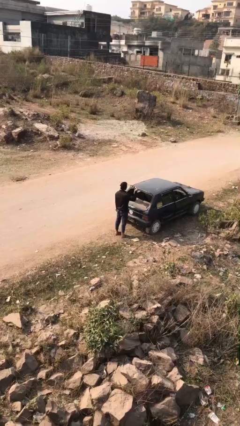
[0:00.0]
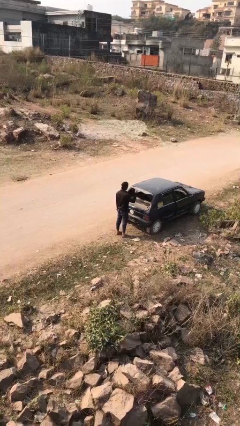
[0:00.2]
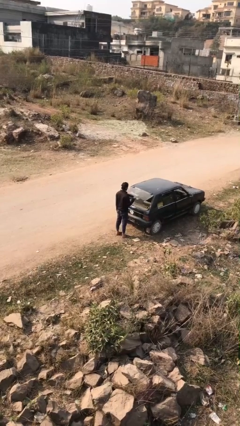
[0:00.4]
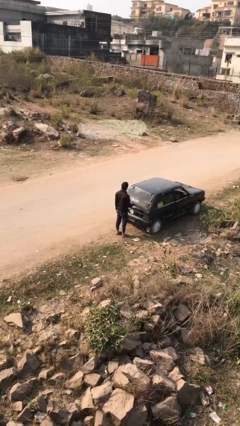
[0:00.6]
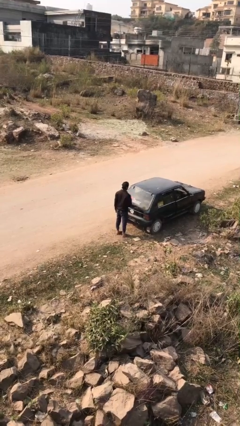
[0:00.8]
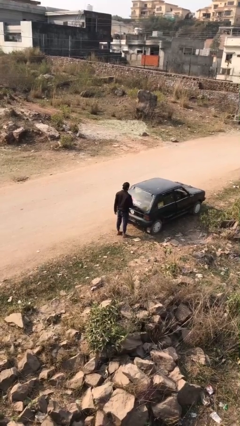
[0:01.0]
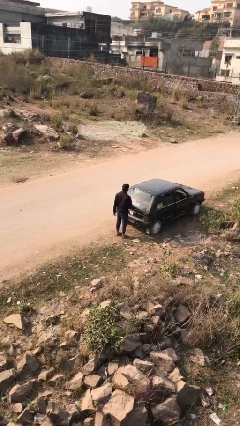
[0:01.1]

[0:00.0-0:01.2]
person closes car trunk

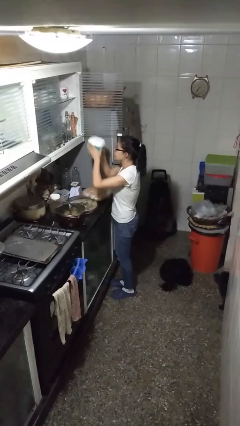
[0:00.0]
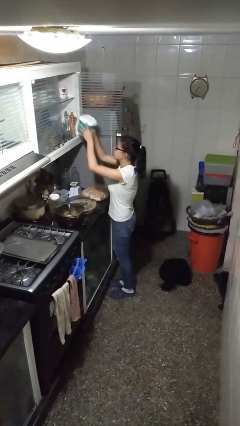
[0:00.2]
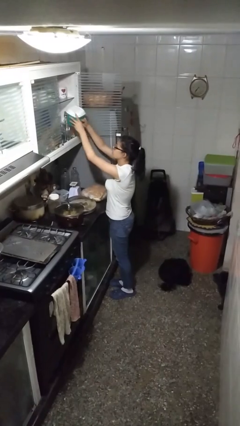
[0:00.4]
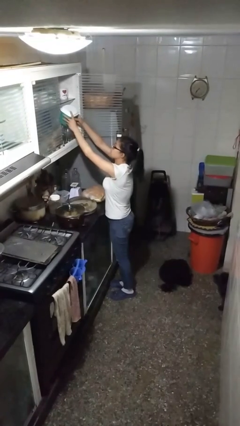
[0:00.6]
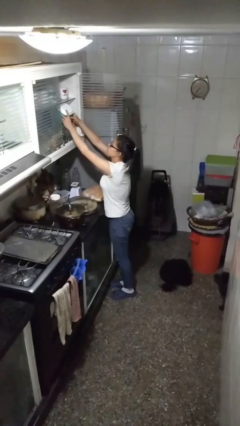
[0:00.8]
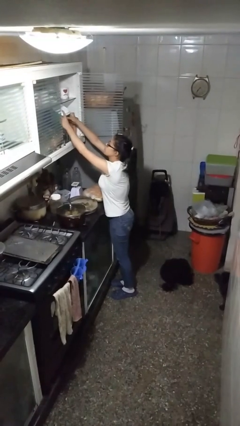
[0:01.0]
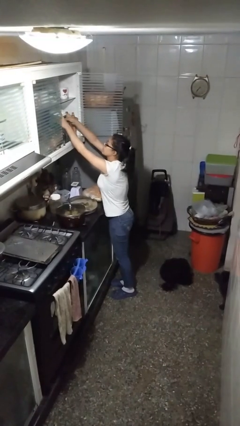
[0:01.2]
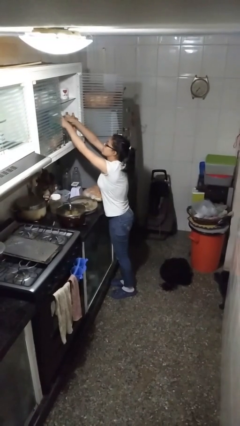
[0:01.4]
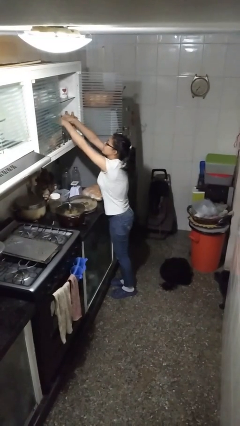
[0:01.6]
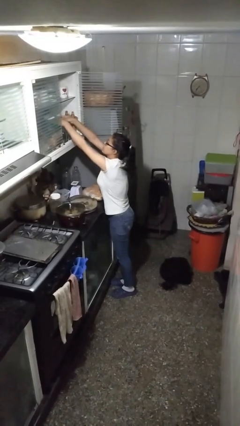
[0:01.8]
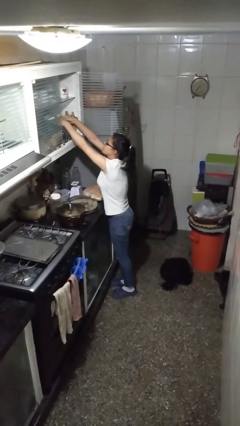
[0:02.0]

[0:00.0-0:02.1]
person puts down object into cabinet

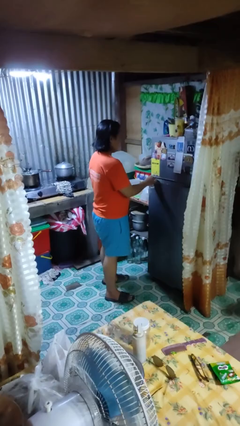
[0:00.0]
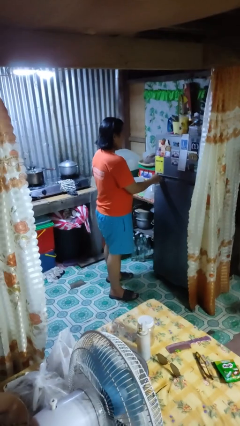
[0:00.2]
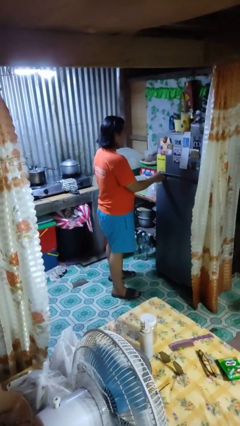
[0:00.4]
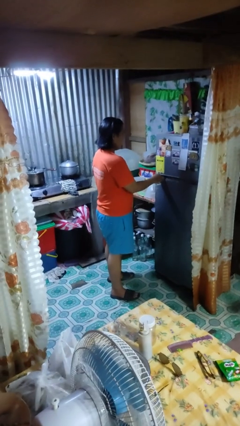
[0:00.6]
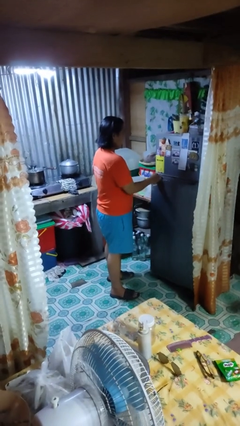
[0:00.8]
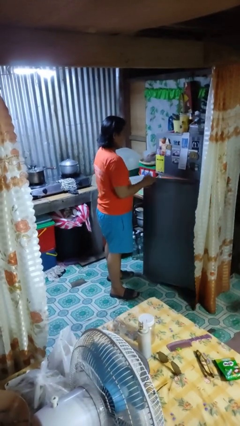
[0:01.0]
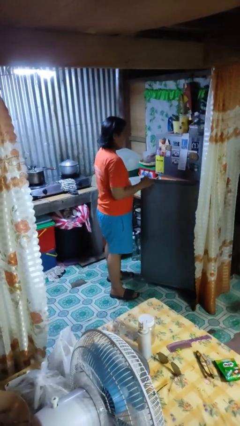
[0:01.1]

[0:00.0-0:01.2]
person opens refrigerator

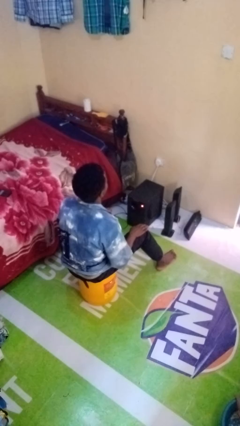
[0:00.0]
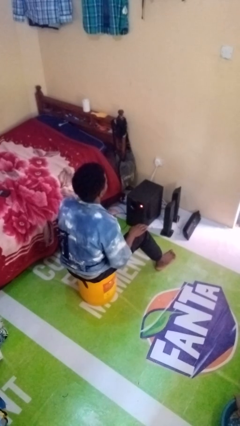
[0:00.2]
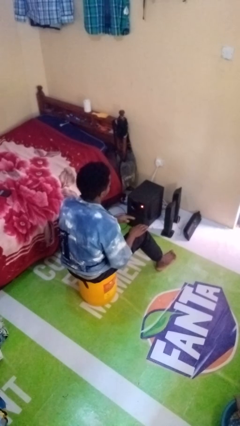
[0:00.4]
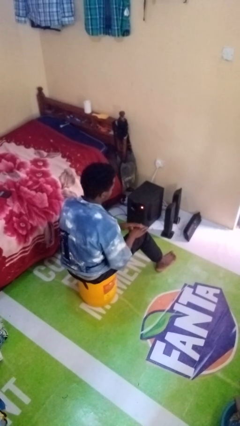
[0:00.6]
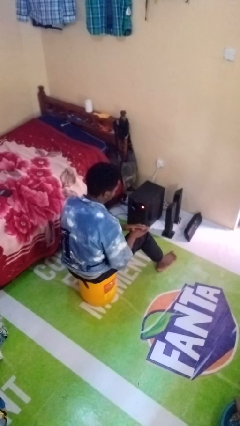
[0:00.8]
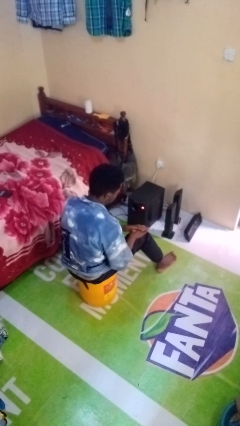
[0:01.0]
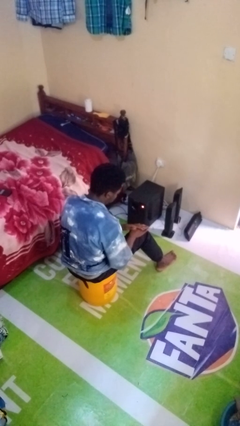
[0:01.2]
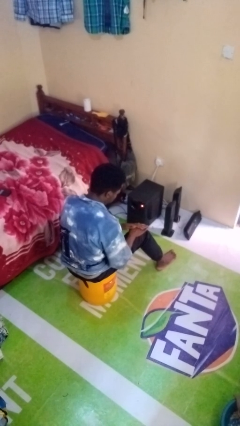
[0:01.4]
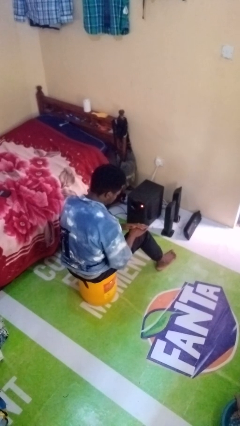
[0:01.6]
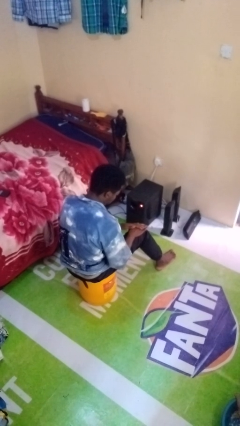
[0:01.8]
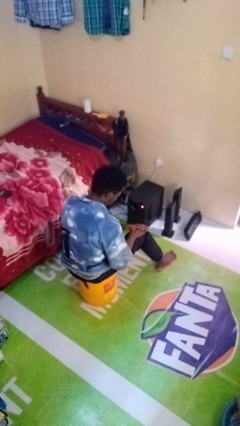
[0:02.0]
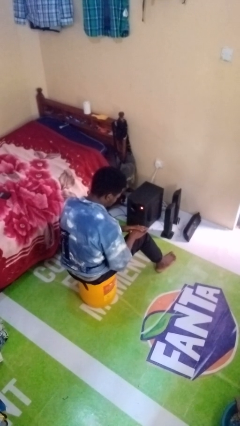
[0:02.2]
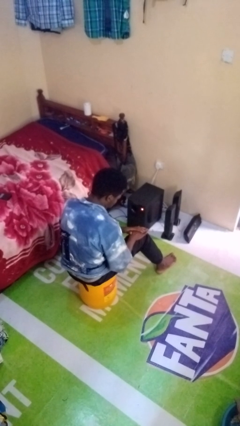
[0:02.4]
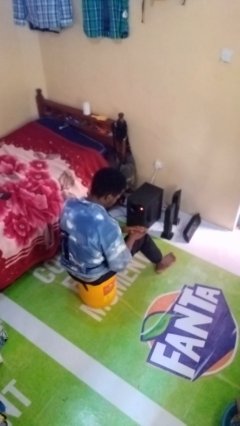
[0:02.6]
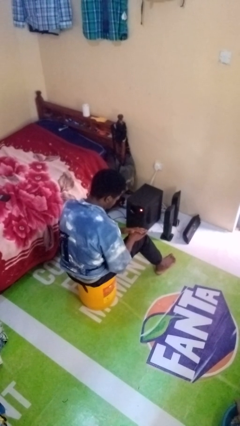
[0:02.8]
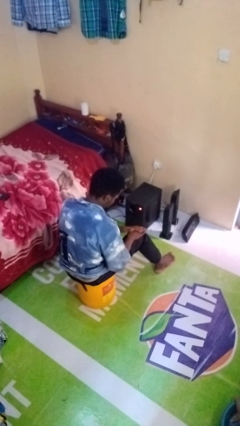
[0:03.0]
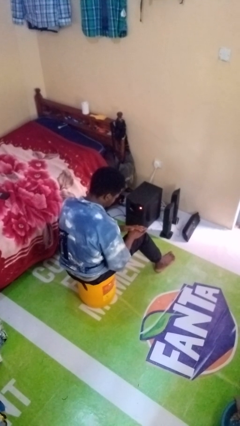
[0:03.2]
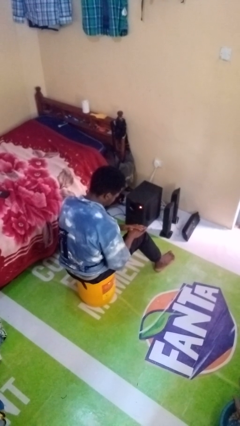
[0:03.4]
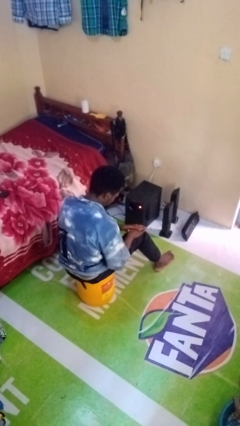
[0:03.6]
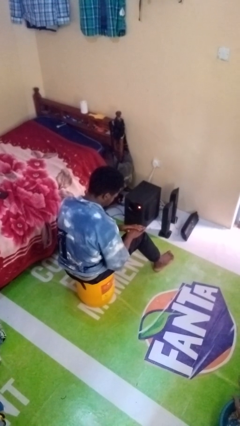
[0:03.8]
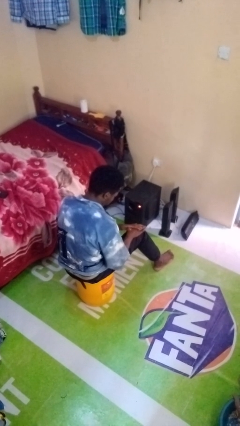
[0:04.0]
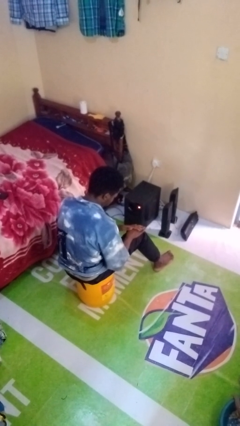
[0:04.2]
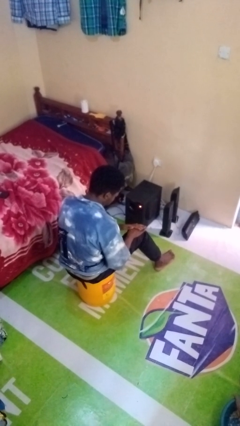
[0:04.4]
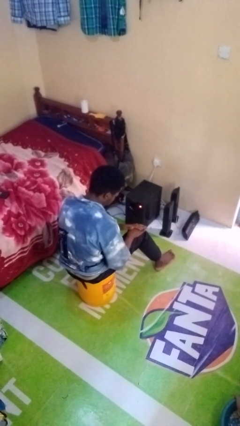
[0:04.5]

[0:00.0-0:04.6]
person looks at hands in lap

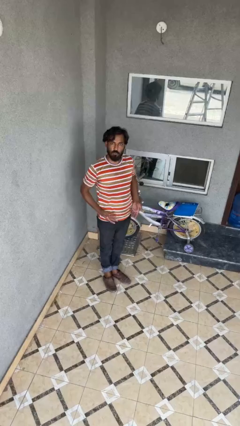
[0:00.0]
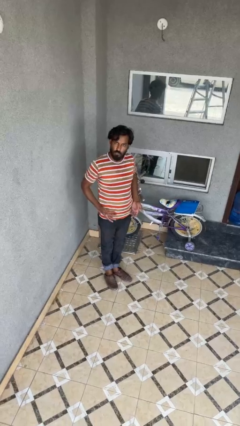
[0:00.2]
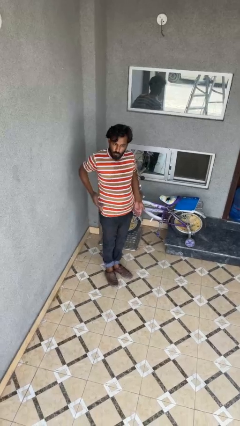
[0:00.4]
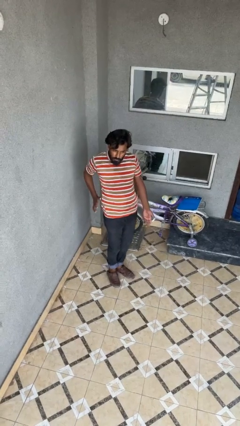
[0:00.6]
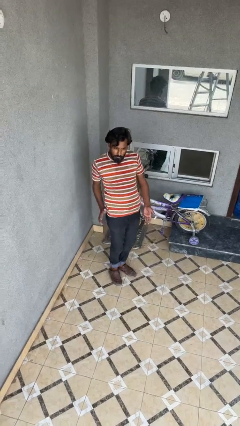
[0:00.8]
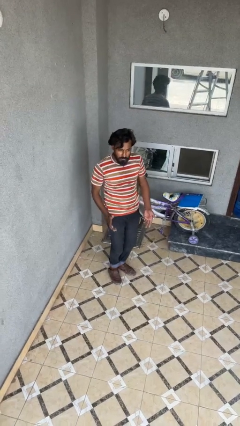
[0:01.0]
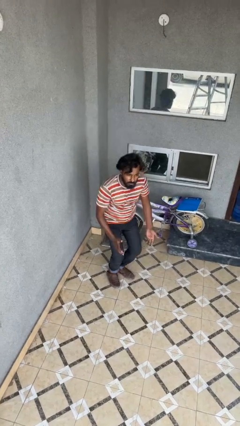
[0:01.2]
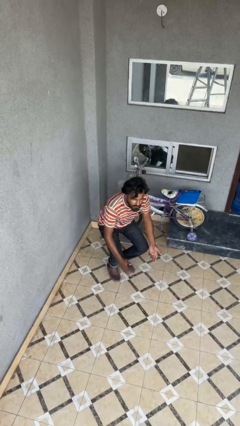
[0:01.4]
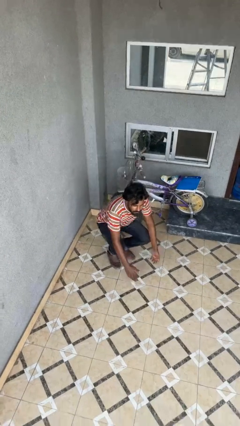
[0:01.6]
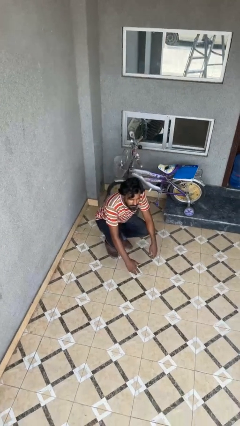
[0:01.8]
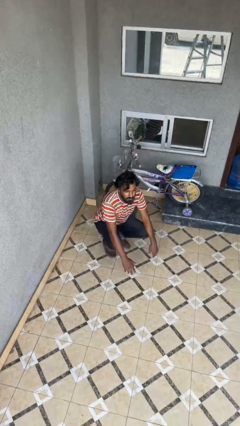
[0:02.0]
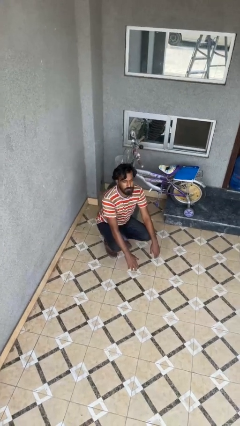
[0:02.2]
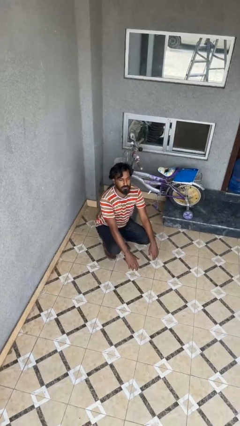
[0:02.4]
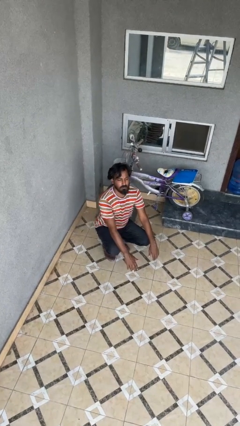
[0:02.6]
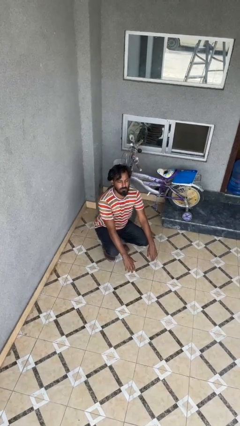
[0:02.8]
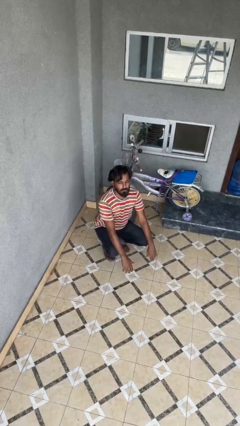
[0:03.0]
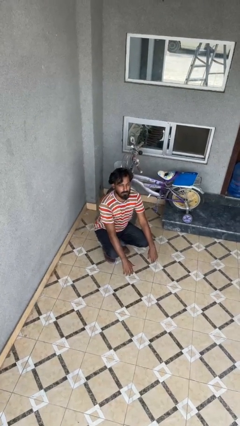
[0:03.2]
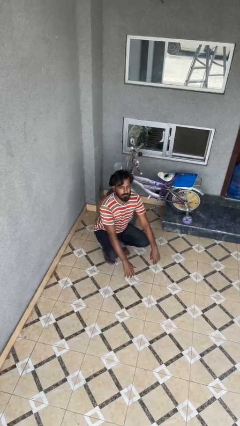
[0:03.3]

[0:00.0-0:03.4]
person squats

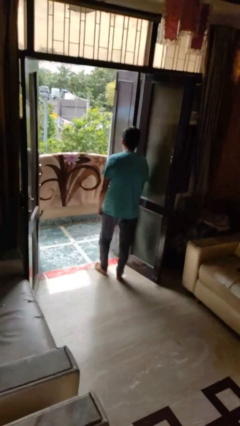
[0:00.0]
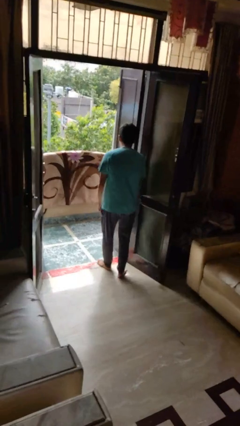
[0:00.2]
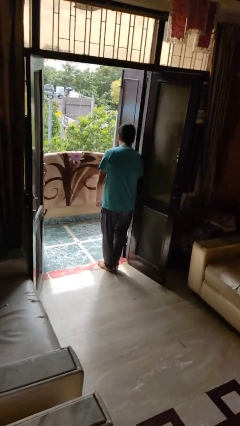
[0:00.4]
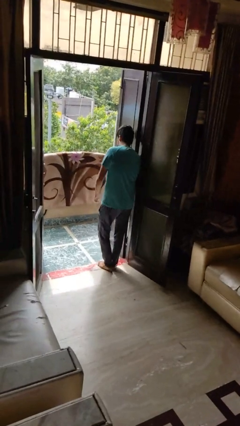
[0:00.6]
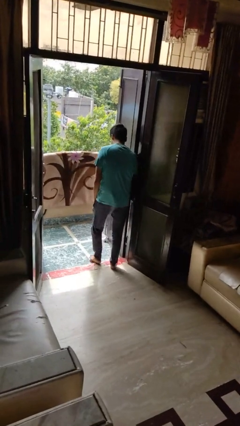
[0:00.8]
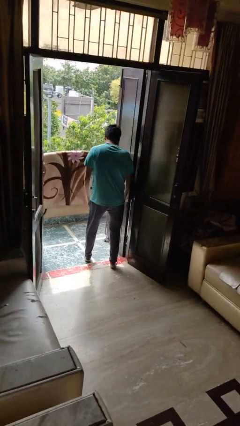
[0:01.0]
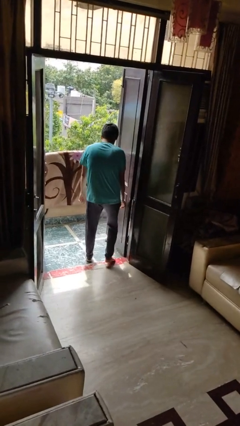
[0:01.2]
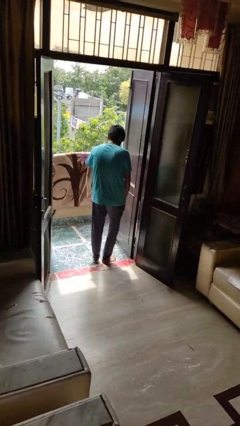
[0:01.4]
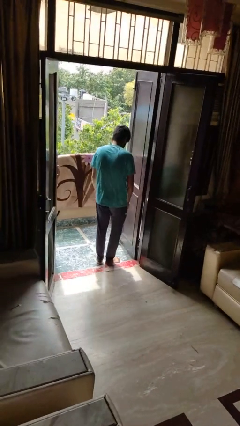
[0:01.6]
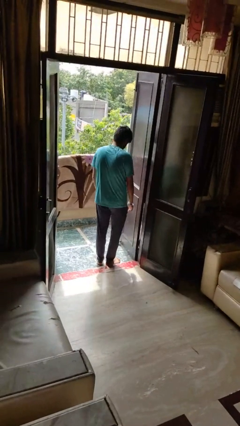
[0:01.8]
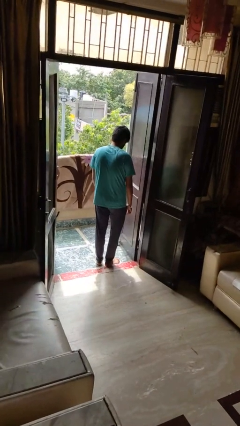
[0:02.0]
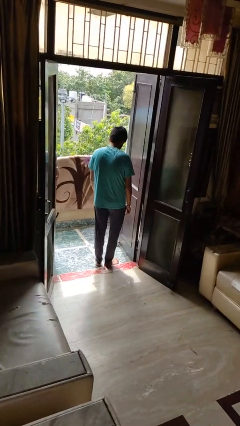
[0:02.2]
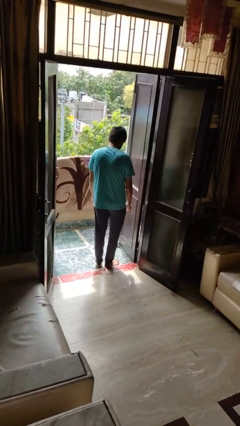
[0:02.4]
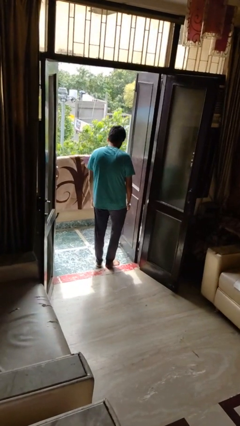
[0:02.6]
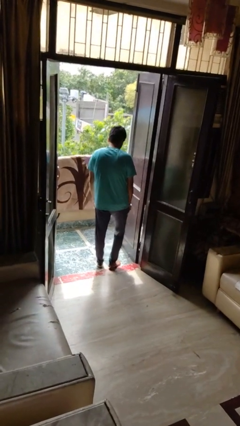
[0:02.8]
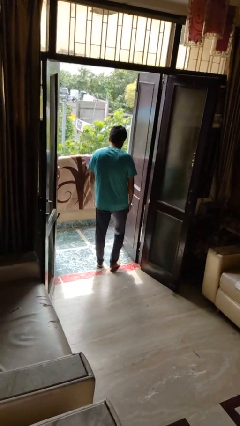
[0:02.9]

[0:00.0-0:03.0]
person bumps into wall

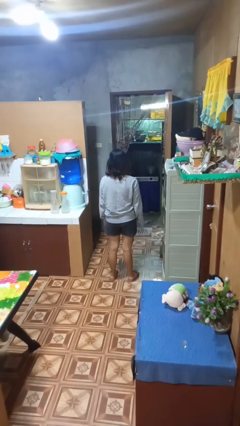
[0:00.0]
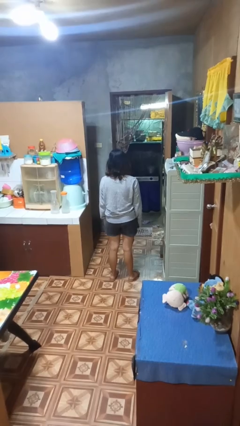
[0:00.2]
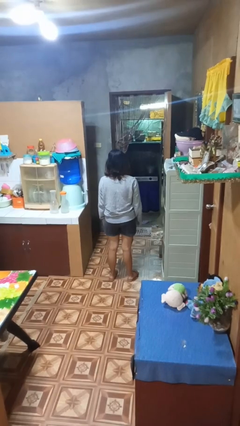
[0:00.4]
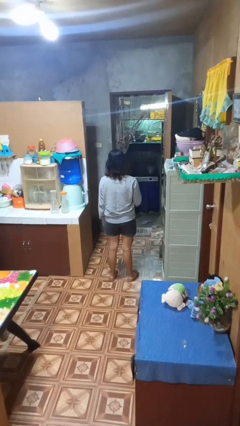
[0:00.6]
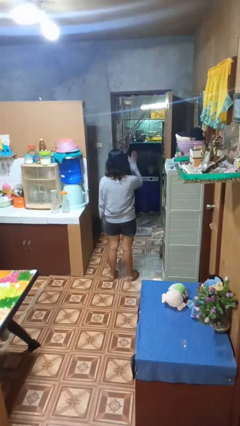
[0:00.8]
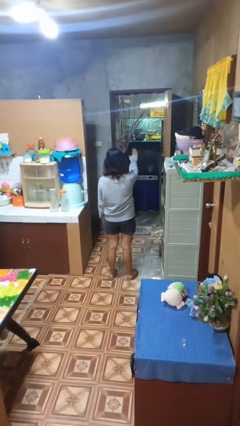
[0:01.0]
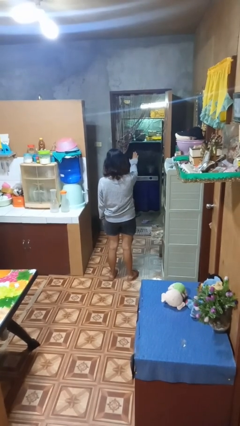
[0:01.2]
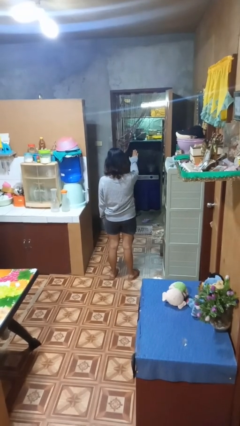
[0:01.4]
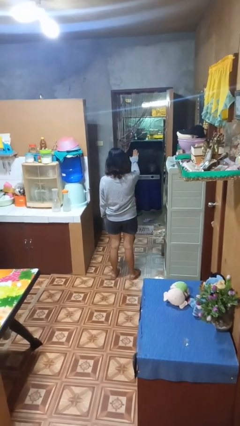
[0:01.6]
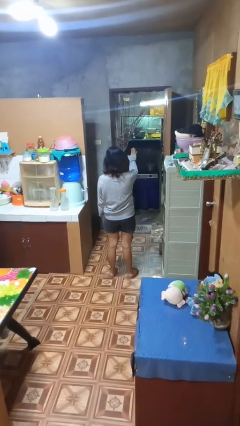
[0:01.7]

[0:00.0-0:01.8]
person gestures stop
